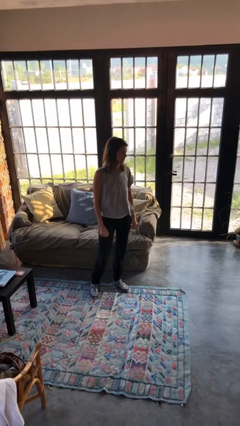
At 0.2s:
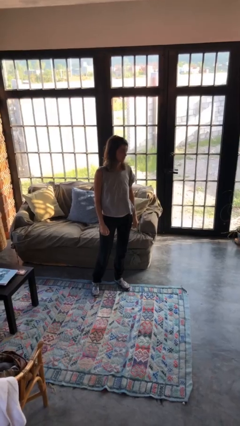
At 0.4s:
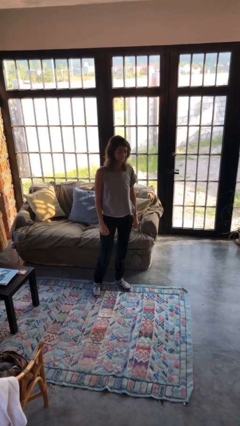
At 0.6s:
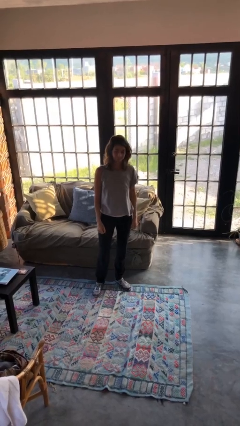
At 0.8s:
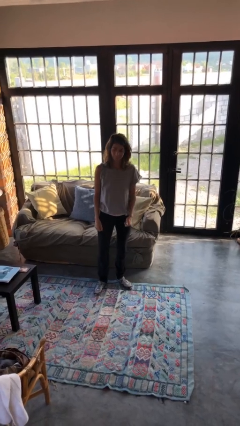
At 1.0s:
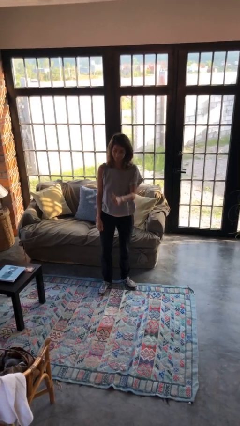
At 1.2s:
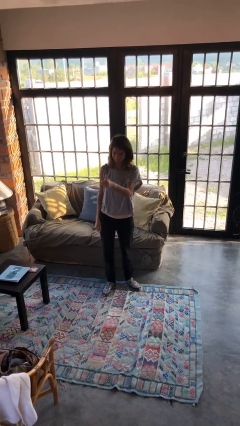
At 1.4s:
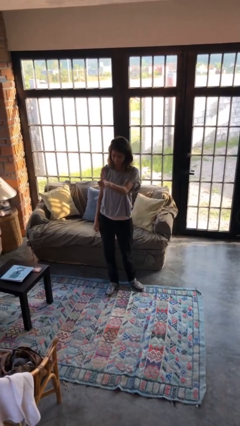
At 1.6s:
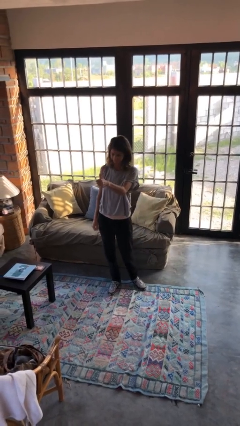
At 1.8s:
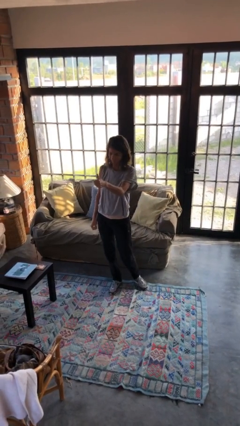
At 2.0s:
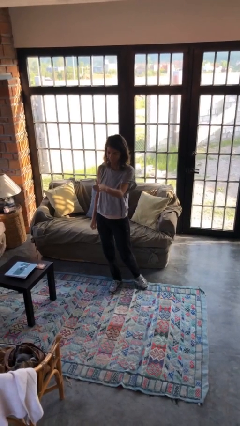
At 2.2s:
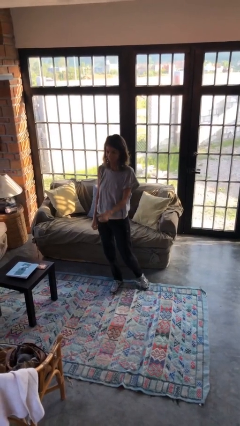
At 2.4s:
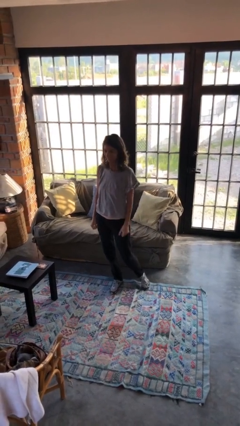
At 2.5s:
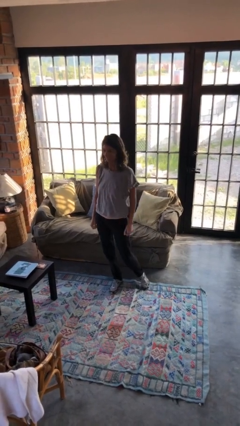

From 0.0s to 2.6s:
person gestures thumbs up

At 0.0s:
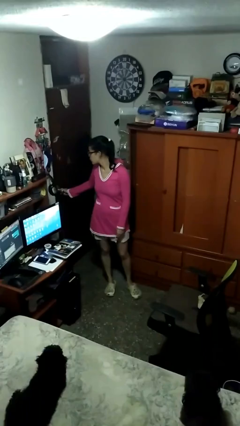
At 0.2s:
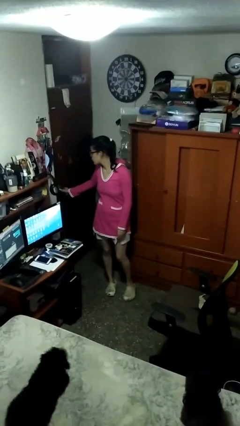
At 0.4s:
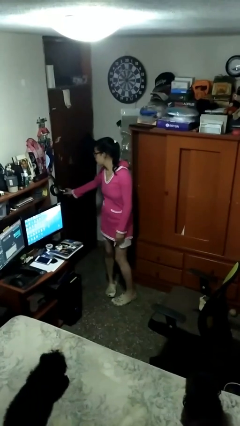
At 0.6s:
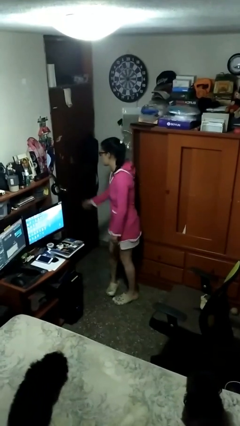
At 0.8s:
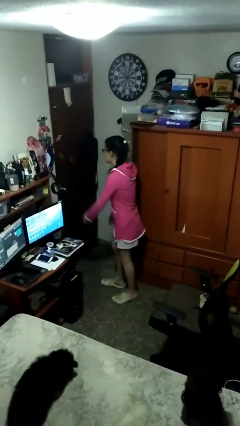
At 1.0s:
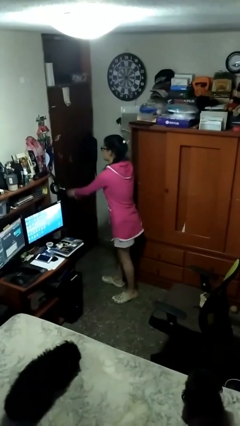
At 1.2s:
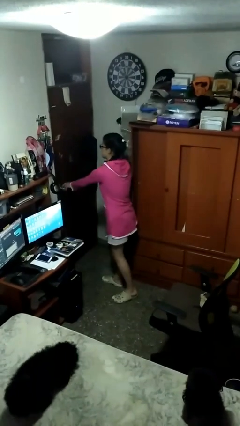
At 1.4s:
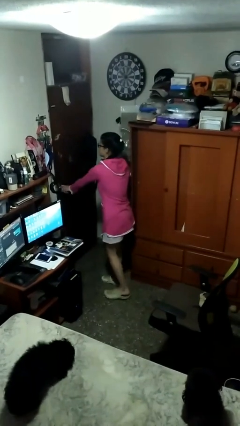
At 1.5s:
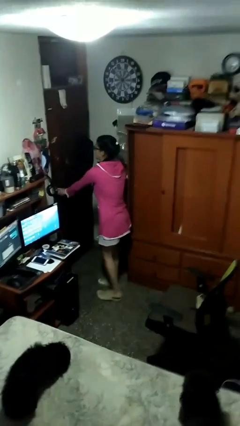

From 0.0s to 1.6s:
person closes facility door

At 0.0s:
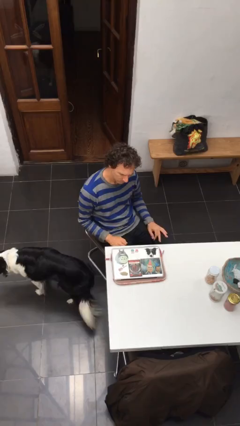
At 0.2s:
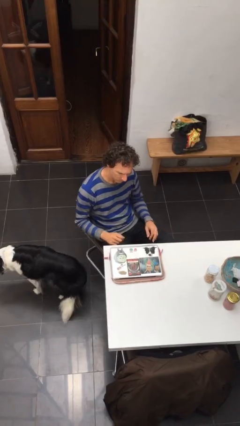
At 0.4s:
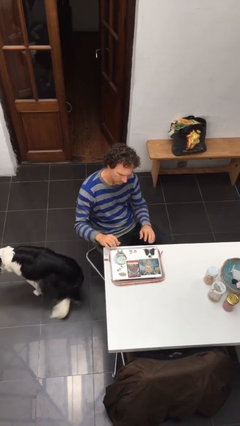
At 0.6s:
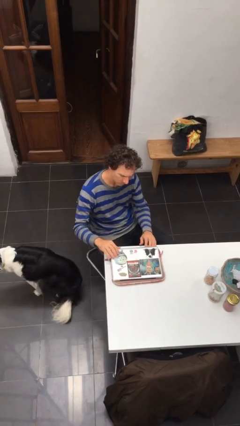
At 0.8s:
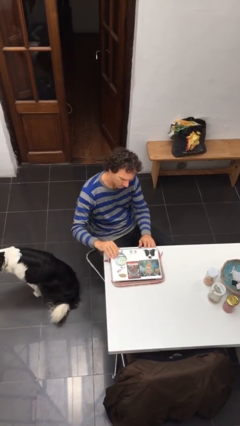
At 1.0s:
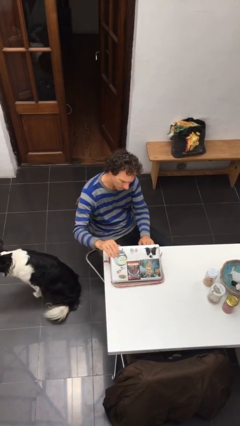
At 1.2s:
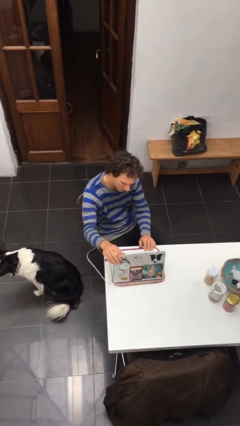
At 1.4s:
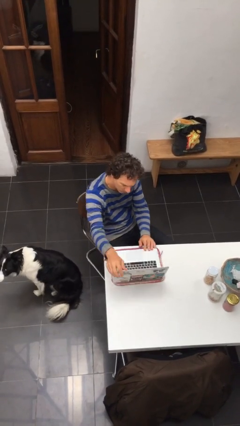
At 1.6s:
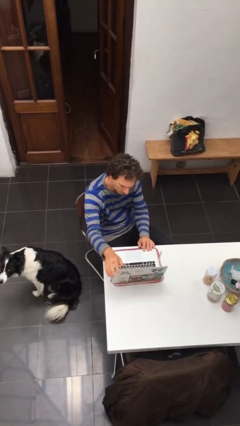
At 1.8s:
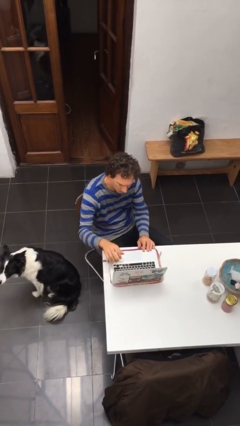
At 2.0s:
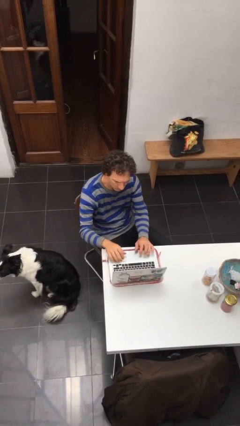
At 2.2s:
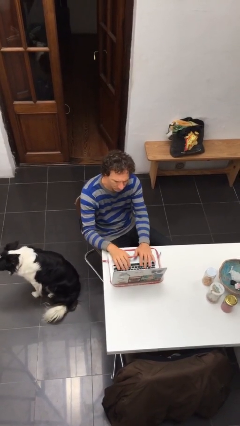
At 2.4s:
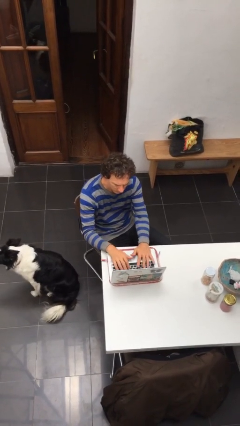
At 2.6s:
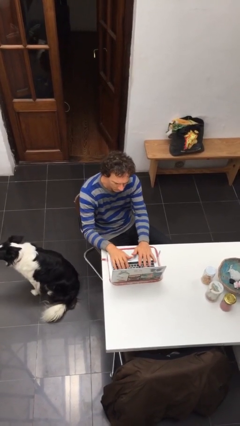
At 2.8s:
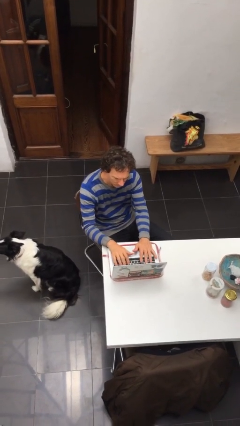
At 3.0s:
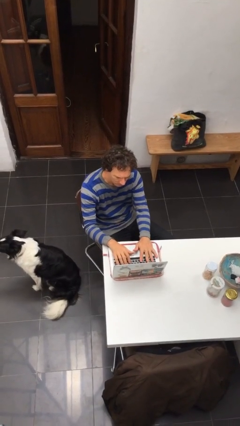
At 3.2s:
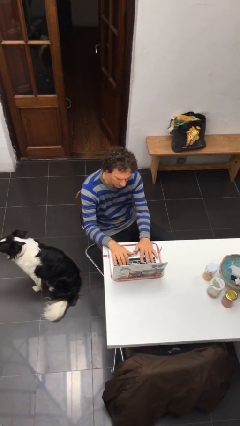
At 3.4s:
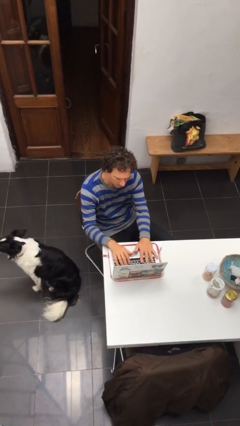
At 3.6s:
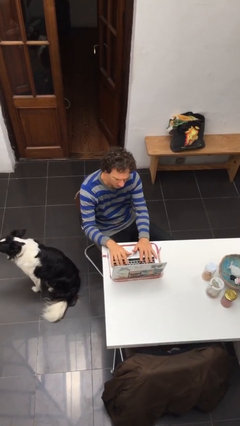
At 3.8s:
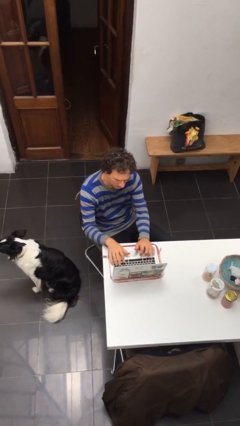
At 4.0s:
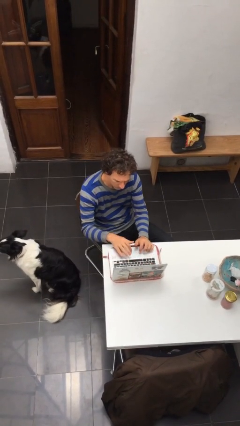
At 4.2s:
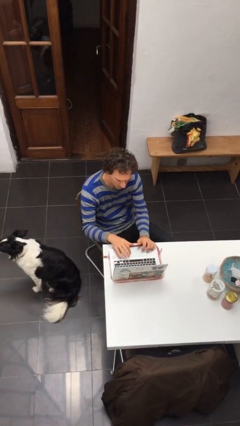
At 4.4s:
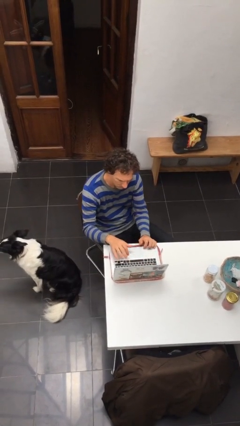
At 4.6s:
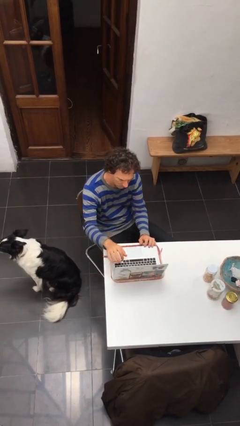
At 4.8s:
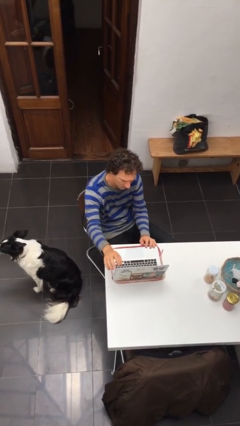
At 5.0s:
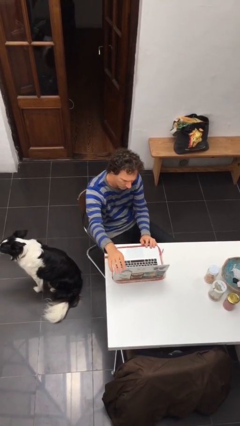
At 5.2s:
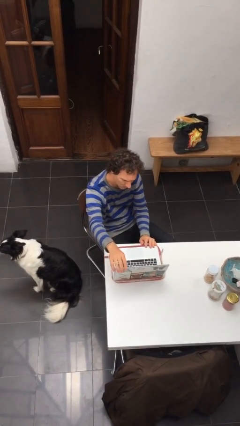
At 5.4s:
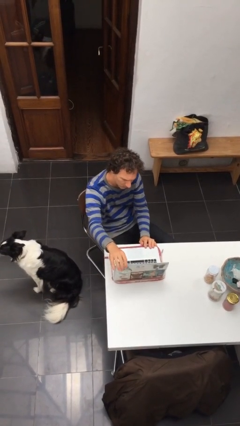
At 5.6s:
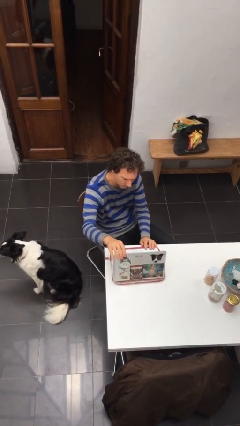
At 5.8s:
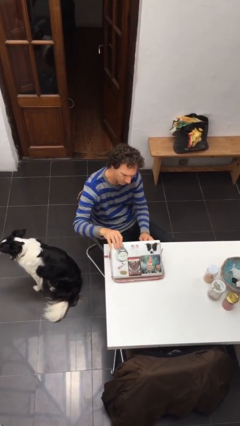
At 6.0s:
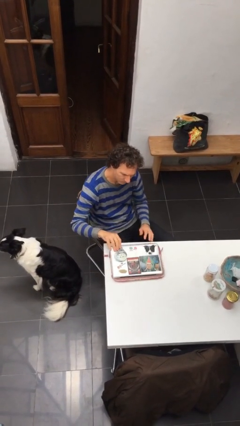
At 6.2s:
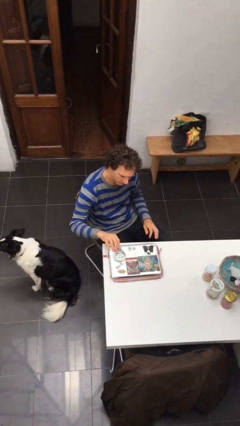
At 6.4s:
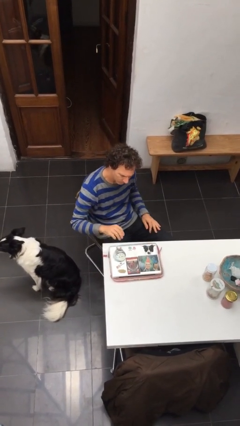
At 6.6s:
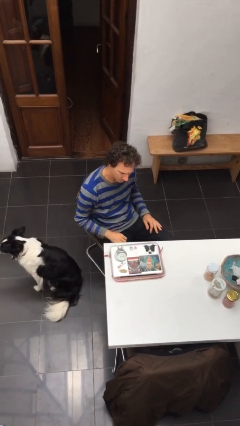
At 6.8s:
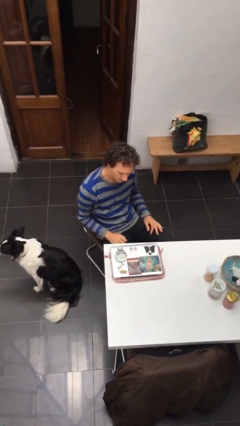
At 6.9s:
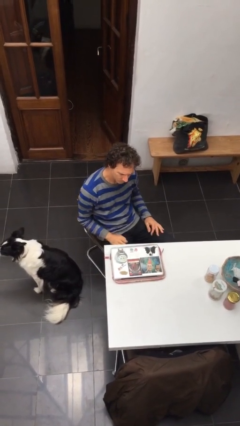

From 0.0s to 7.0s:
person interacts with laptop

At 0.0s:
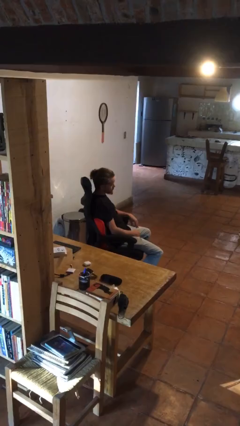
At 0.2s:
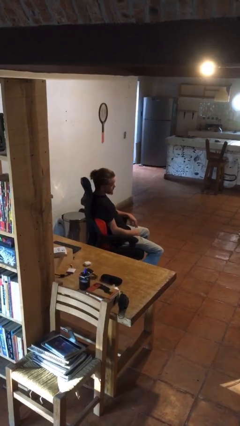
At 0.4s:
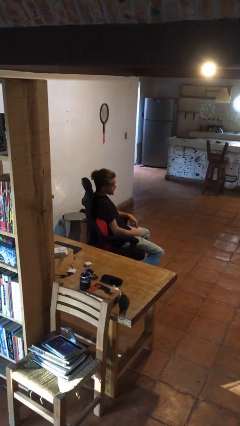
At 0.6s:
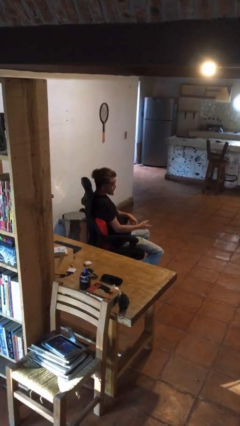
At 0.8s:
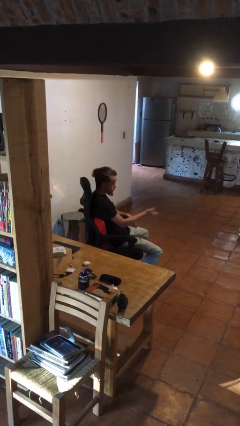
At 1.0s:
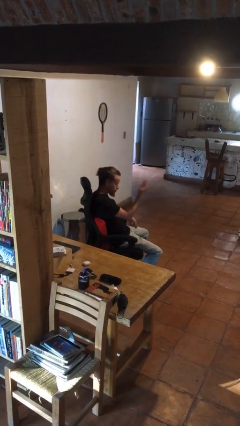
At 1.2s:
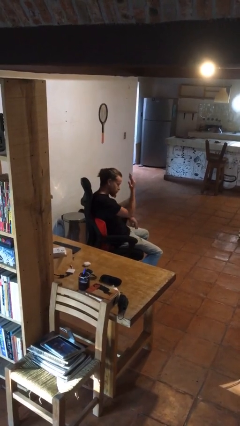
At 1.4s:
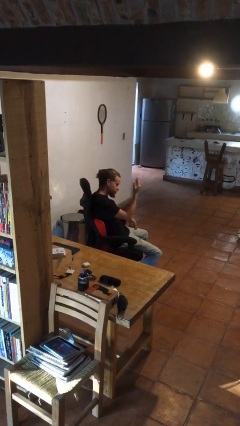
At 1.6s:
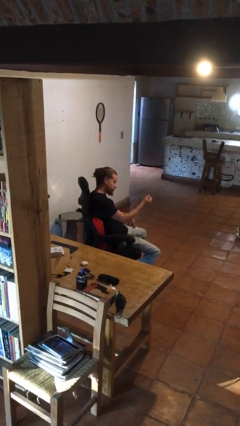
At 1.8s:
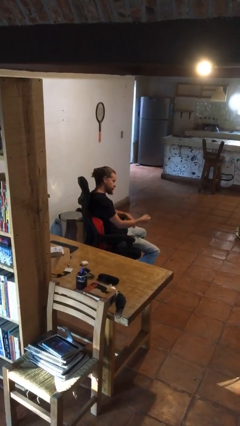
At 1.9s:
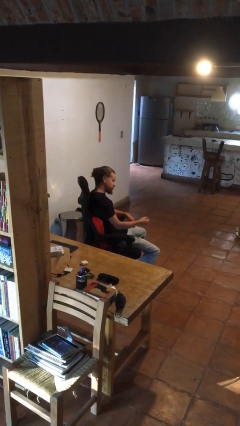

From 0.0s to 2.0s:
person gestures swipe up

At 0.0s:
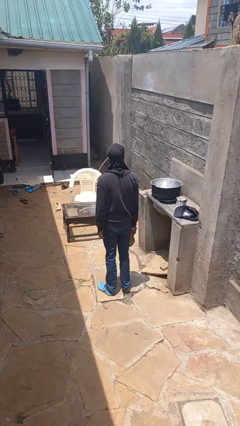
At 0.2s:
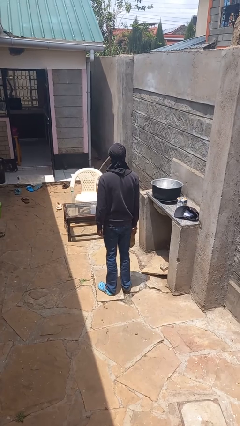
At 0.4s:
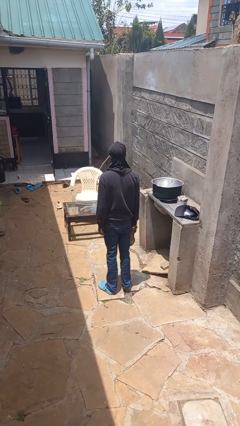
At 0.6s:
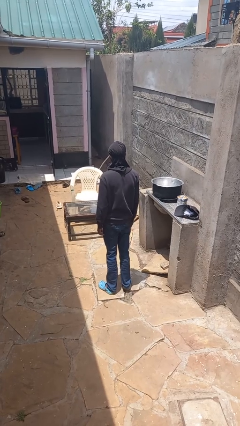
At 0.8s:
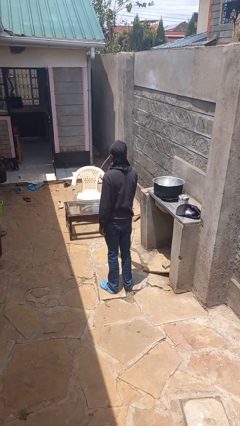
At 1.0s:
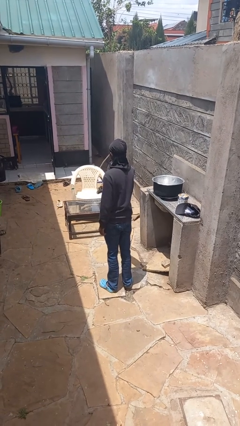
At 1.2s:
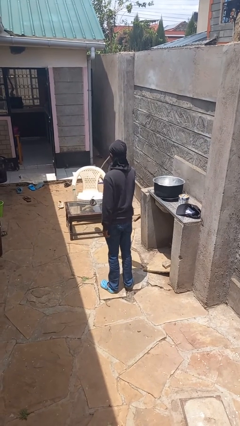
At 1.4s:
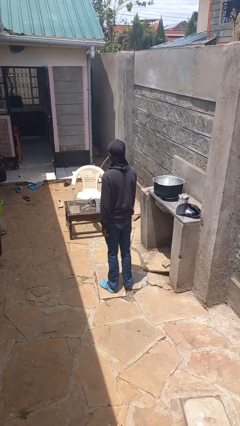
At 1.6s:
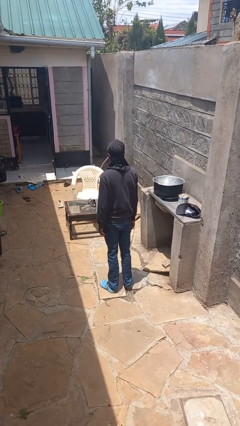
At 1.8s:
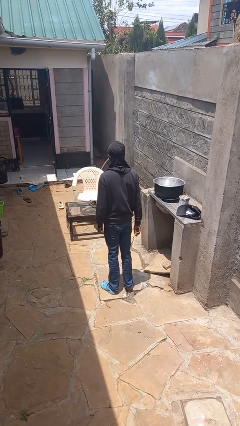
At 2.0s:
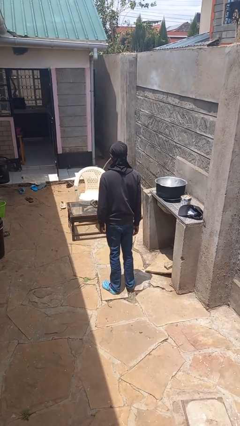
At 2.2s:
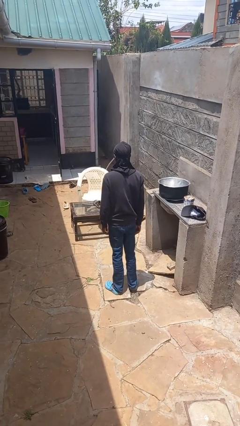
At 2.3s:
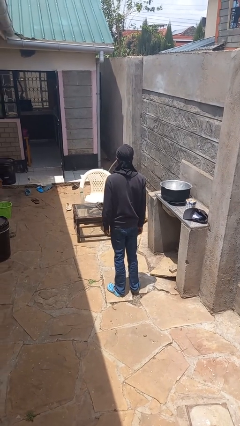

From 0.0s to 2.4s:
person throws object on table

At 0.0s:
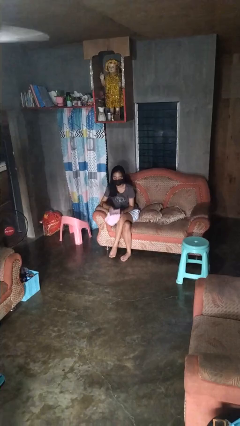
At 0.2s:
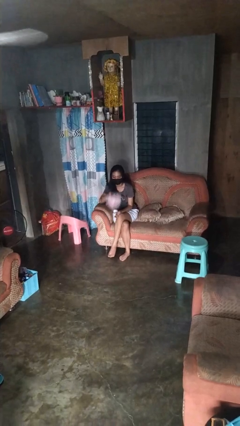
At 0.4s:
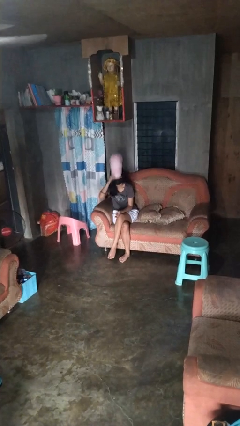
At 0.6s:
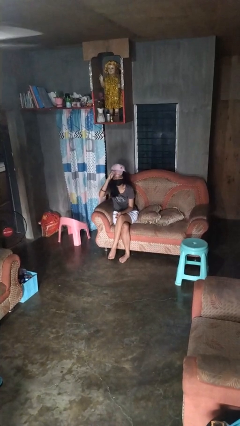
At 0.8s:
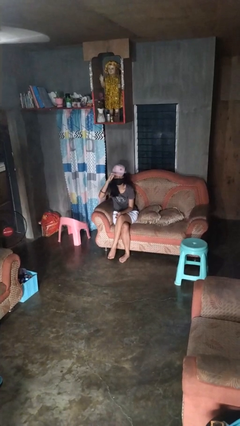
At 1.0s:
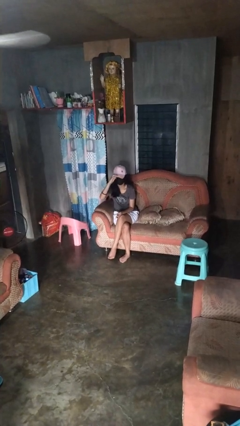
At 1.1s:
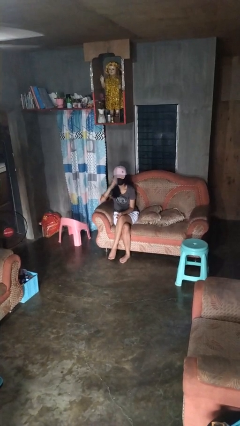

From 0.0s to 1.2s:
person puts on hat

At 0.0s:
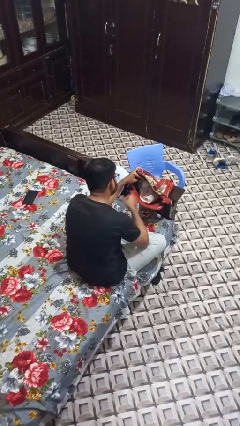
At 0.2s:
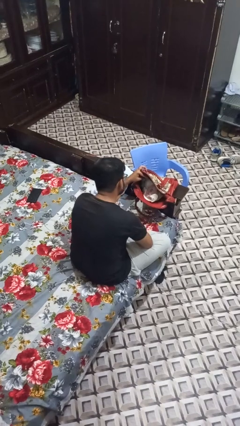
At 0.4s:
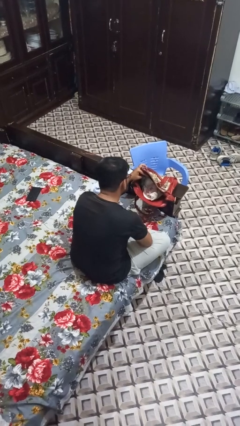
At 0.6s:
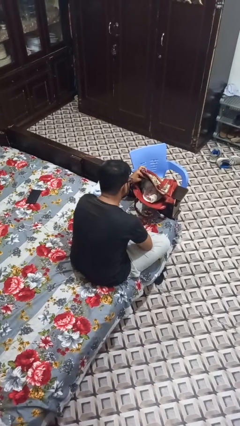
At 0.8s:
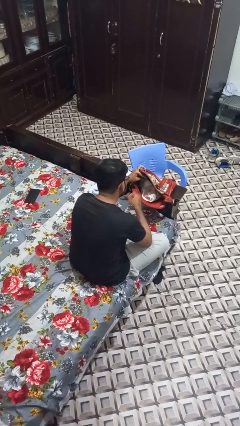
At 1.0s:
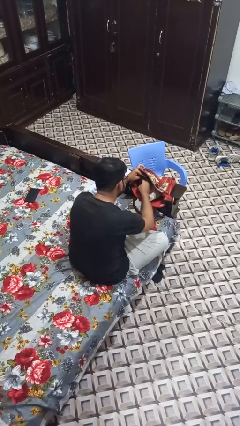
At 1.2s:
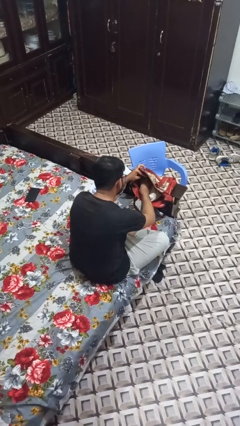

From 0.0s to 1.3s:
person searches in purse
